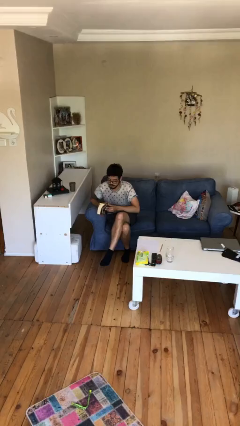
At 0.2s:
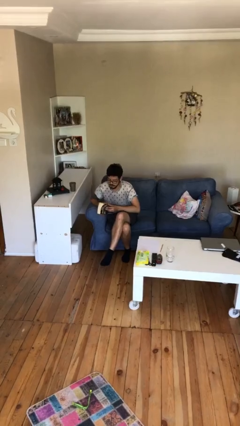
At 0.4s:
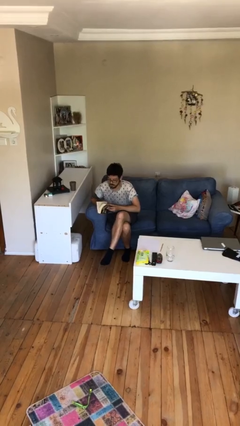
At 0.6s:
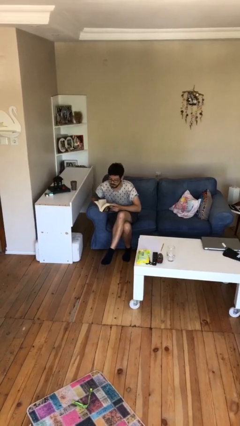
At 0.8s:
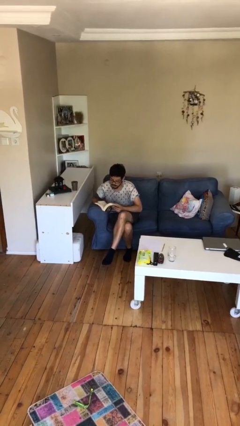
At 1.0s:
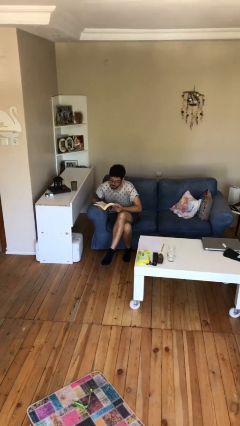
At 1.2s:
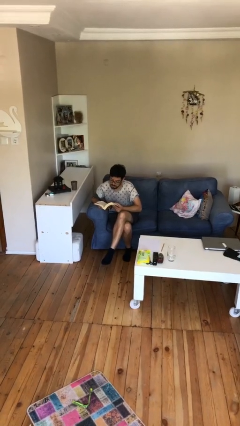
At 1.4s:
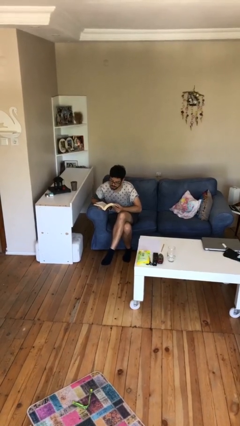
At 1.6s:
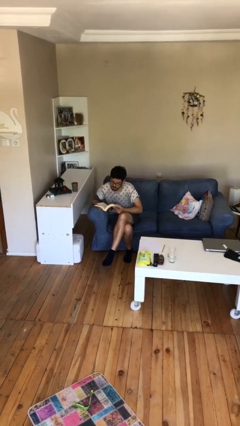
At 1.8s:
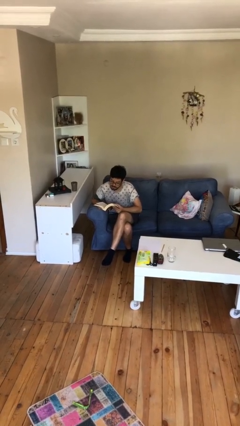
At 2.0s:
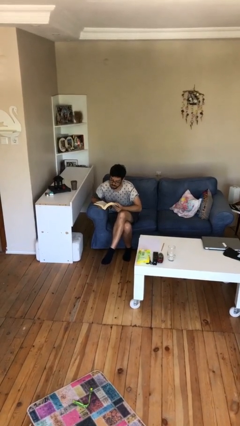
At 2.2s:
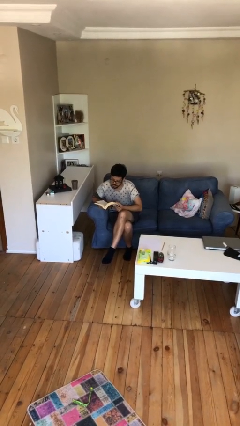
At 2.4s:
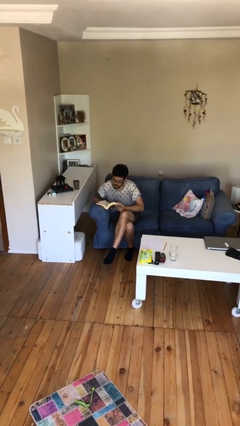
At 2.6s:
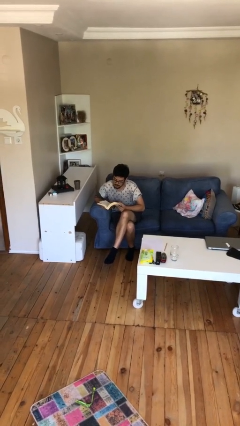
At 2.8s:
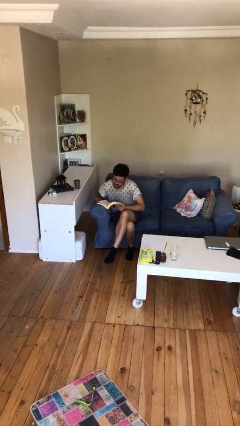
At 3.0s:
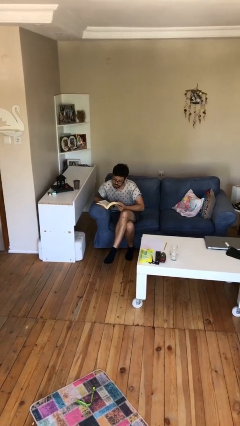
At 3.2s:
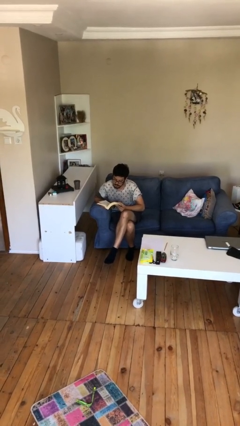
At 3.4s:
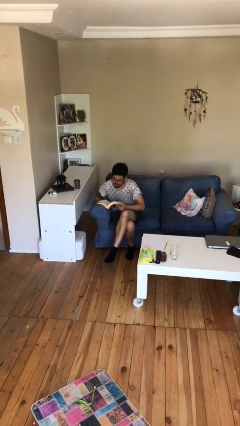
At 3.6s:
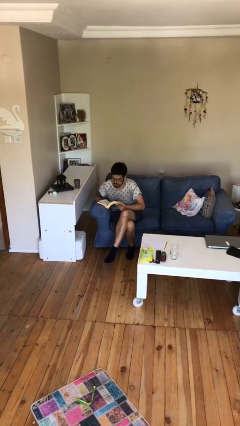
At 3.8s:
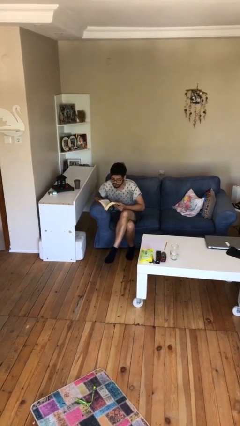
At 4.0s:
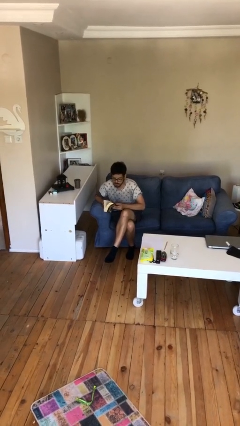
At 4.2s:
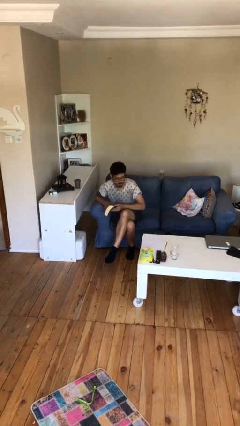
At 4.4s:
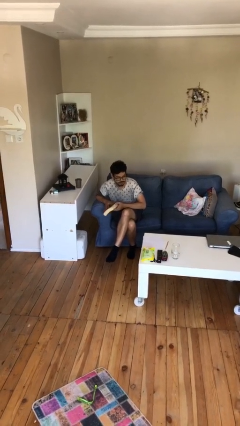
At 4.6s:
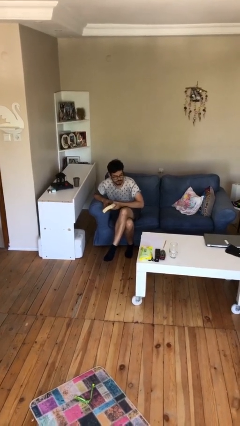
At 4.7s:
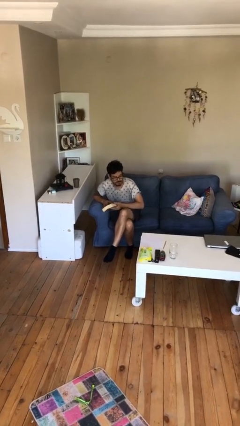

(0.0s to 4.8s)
person reads document

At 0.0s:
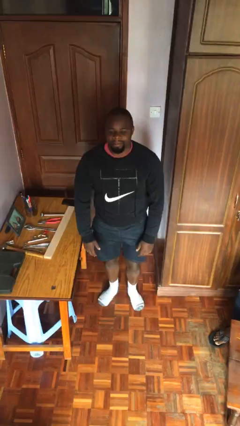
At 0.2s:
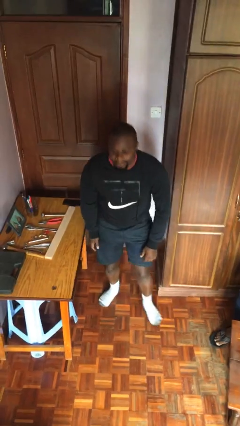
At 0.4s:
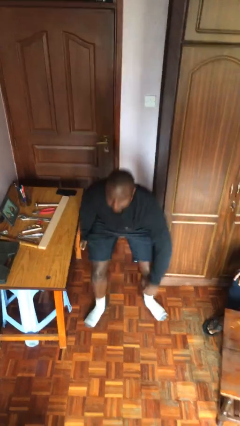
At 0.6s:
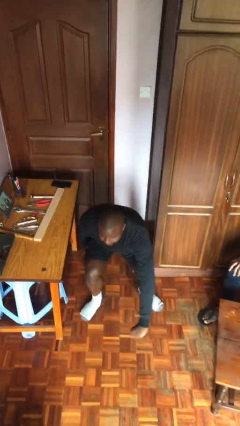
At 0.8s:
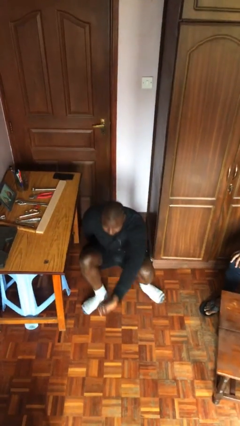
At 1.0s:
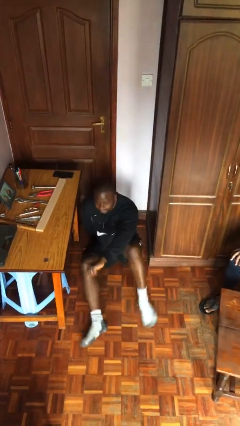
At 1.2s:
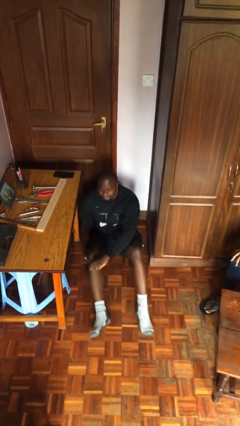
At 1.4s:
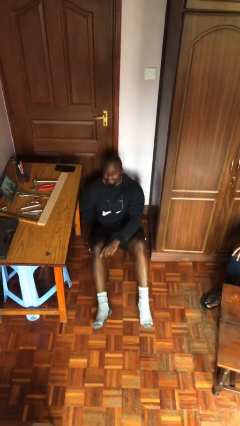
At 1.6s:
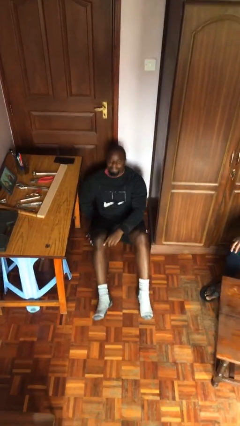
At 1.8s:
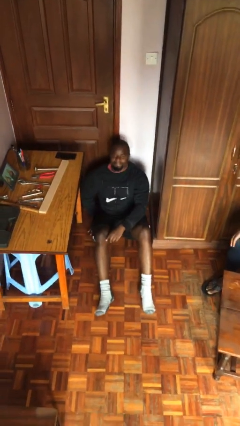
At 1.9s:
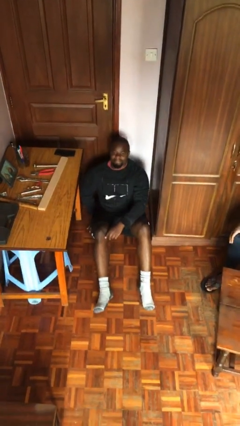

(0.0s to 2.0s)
person sits down

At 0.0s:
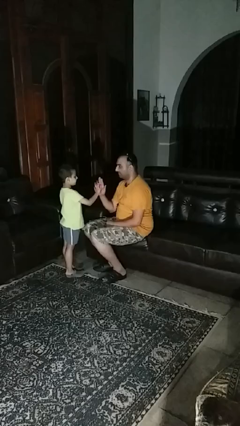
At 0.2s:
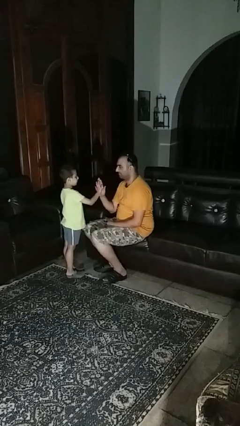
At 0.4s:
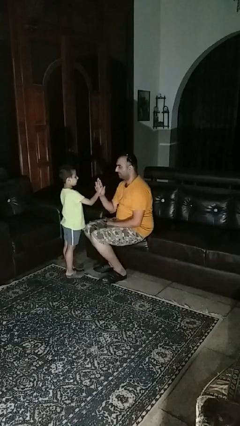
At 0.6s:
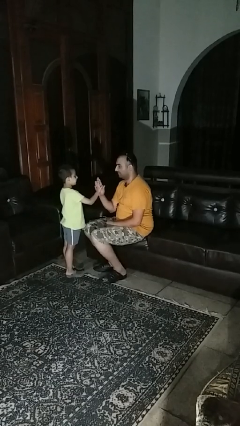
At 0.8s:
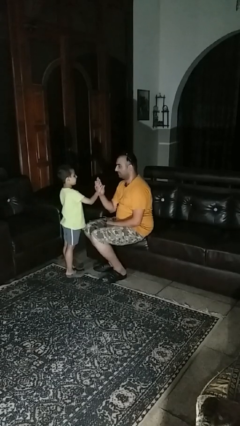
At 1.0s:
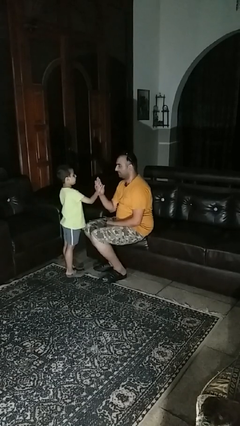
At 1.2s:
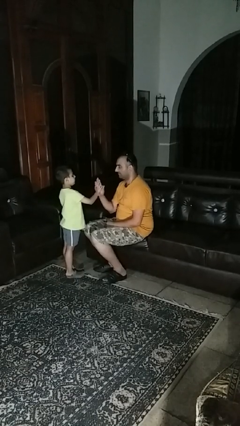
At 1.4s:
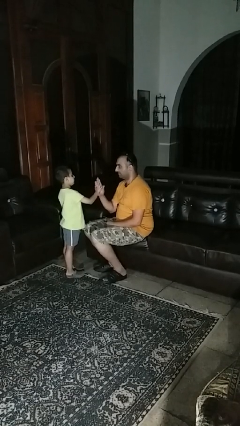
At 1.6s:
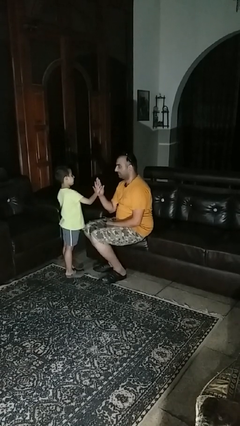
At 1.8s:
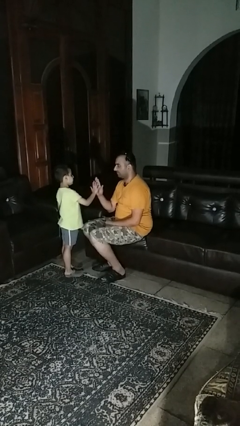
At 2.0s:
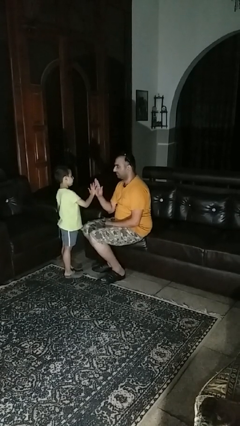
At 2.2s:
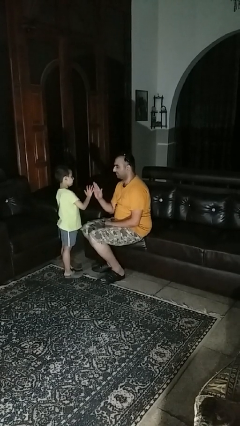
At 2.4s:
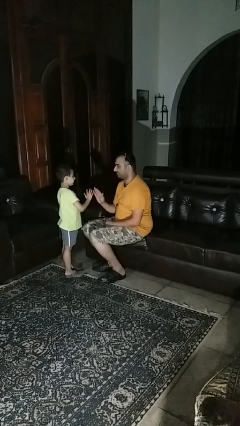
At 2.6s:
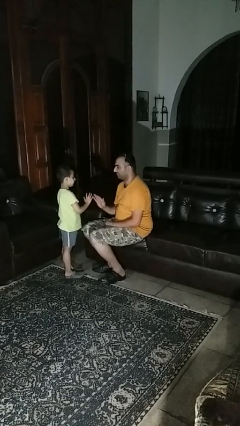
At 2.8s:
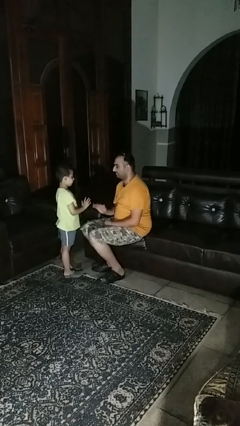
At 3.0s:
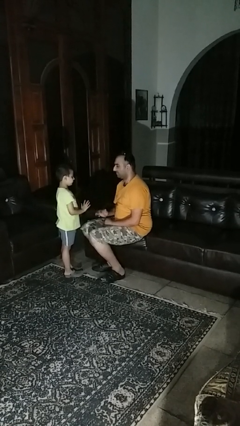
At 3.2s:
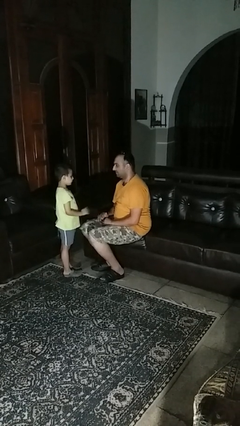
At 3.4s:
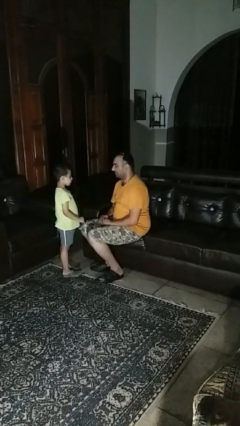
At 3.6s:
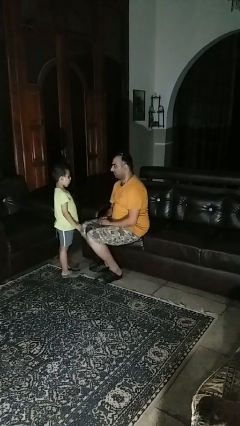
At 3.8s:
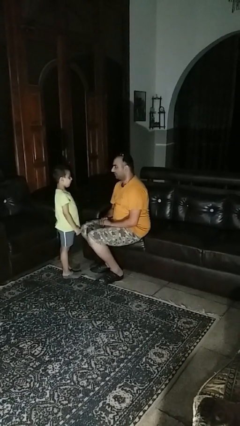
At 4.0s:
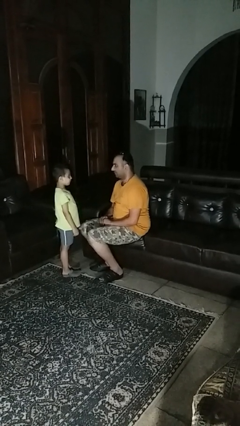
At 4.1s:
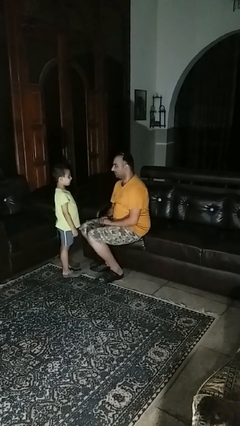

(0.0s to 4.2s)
person highfives hand

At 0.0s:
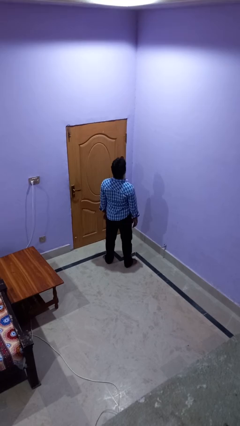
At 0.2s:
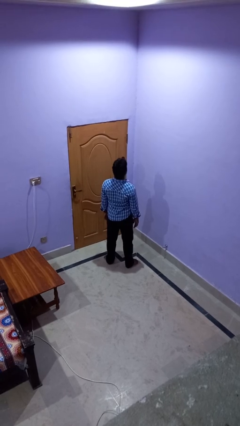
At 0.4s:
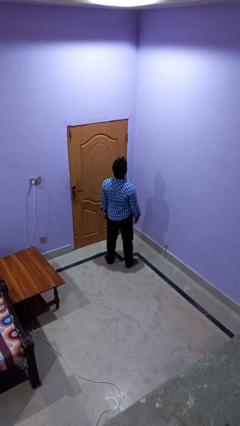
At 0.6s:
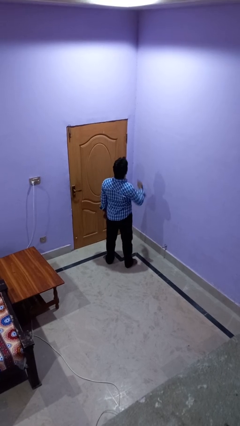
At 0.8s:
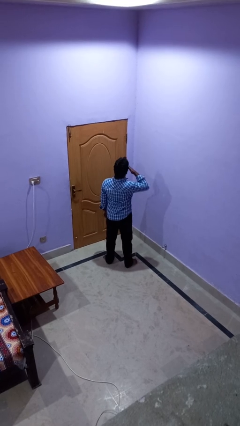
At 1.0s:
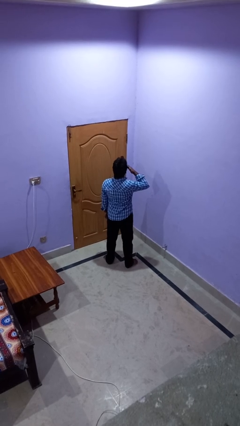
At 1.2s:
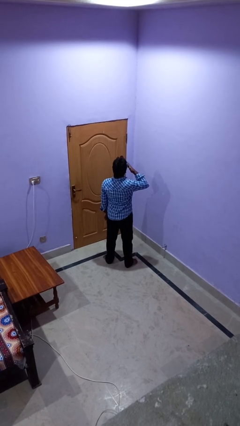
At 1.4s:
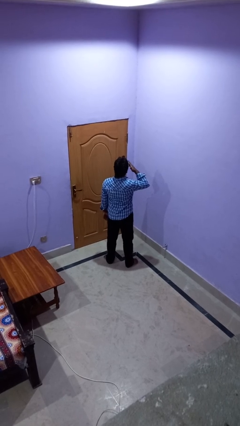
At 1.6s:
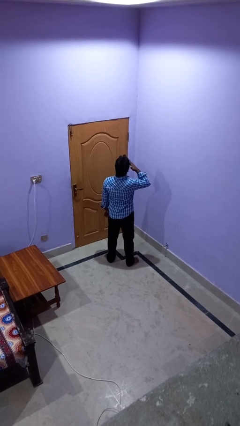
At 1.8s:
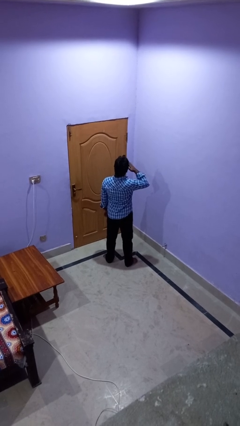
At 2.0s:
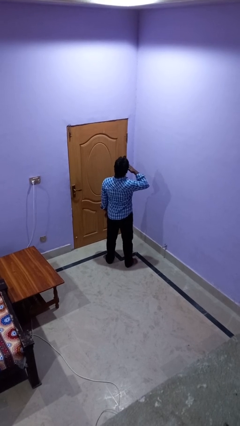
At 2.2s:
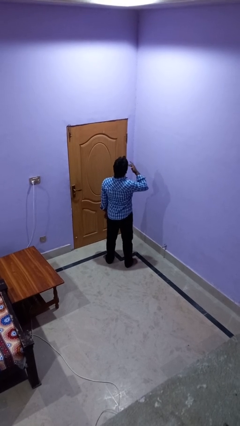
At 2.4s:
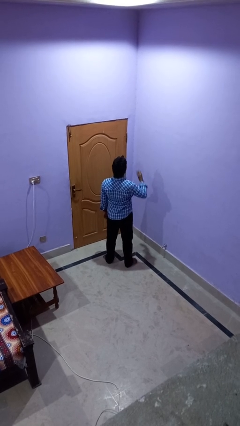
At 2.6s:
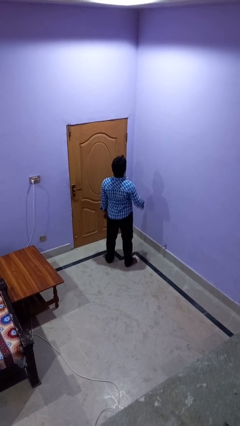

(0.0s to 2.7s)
person rubs eyes

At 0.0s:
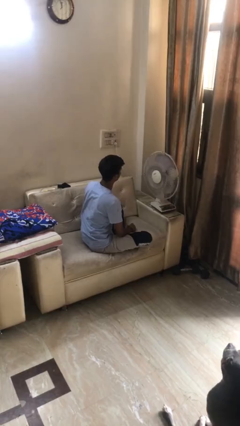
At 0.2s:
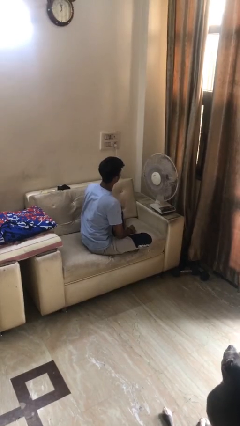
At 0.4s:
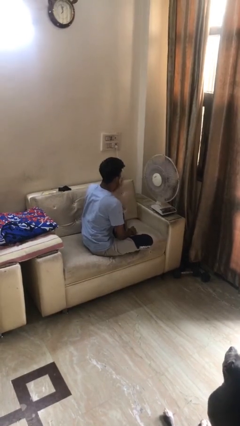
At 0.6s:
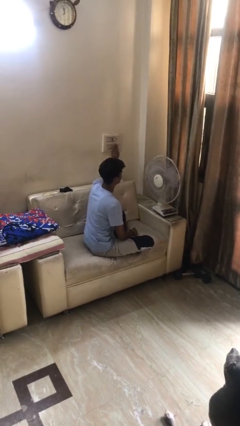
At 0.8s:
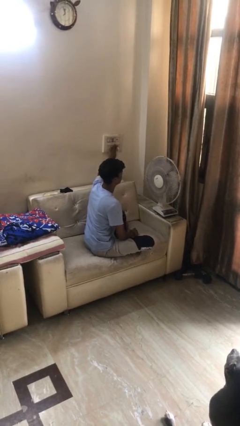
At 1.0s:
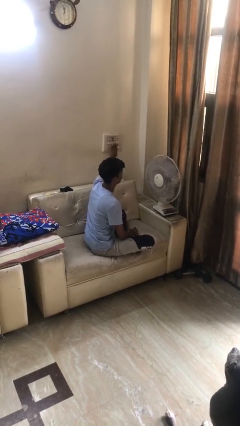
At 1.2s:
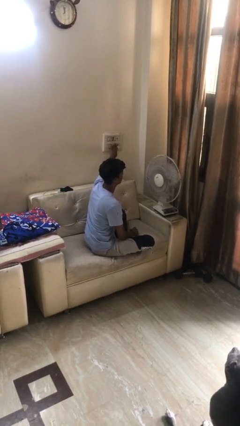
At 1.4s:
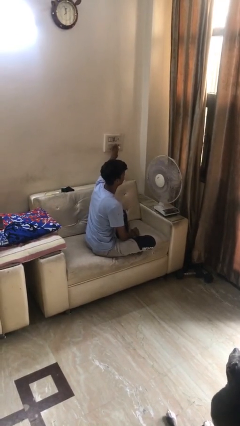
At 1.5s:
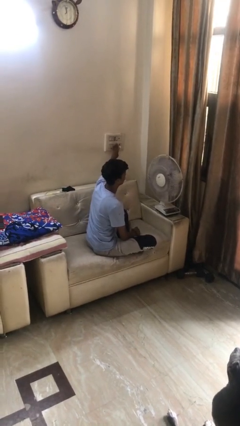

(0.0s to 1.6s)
person turns off fan

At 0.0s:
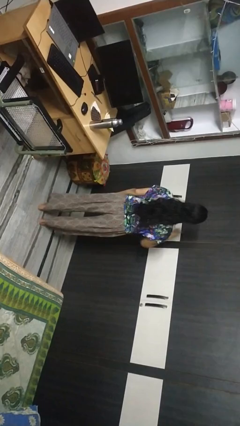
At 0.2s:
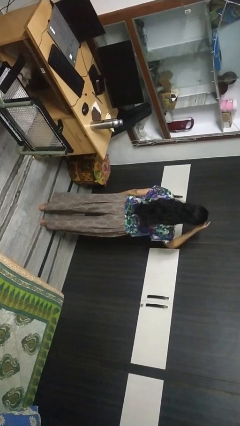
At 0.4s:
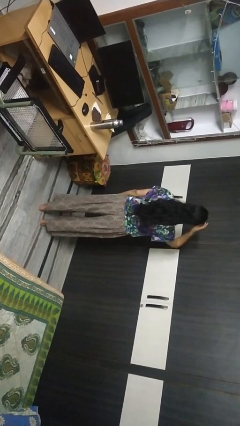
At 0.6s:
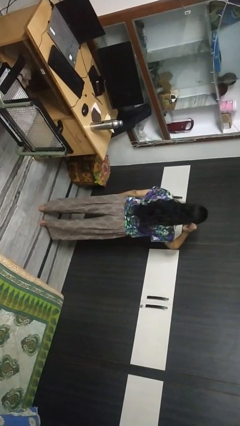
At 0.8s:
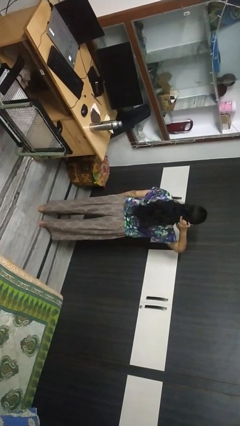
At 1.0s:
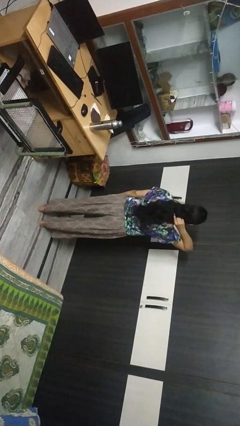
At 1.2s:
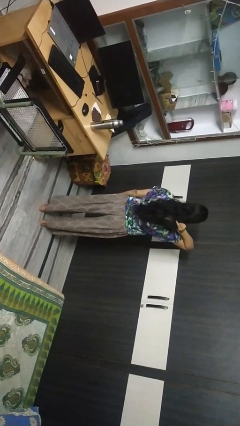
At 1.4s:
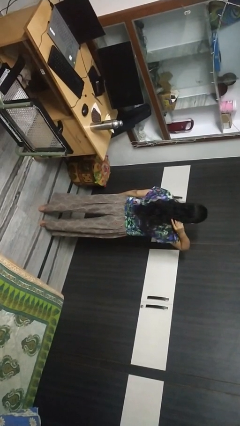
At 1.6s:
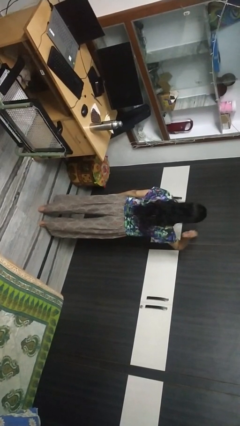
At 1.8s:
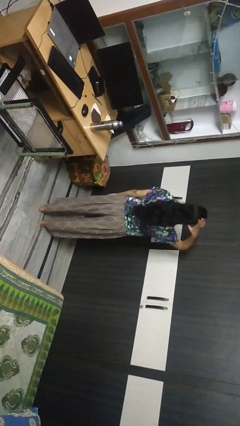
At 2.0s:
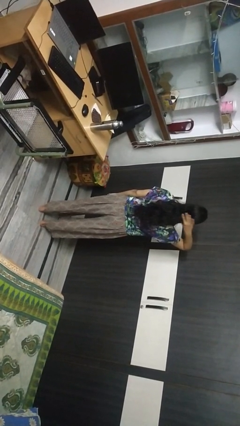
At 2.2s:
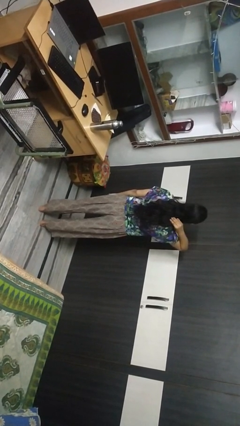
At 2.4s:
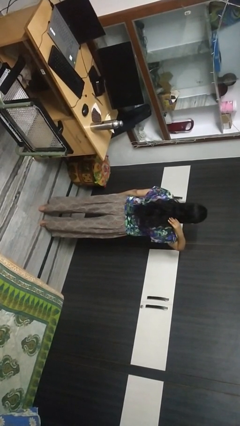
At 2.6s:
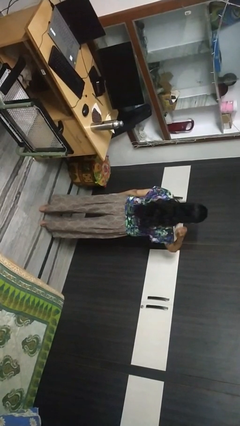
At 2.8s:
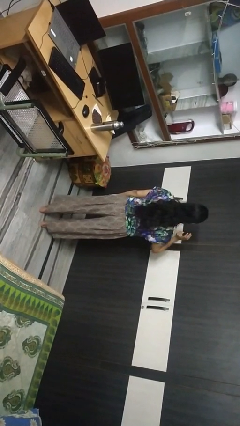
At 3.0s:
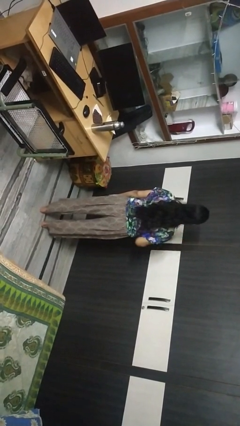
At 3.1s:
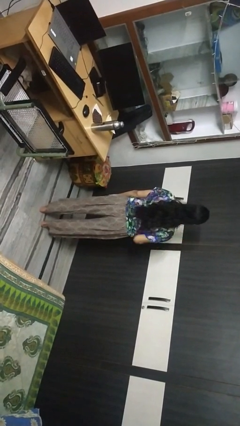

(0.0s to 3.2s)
person strokes hair
